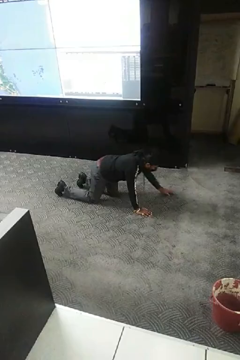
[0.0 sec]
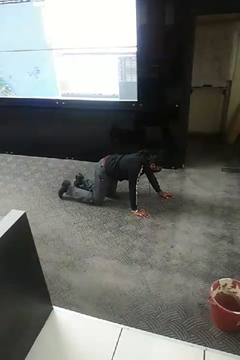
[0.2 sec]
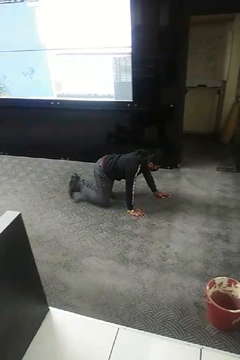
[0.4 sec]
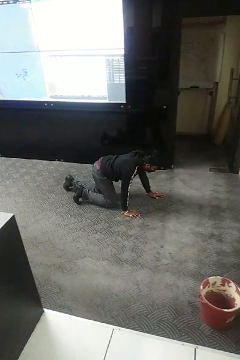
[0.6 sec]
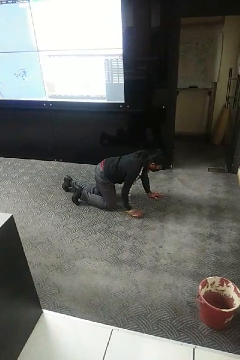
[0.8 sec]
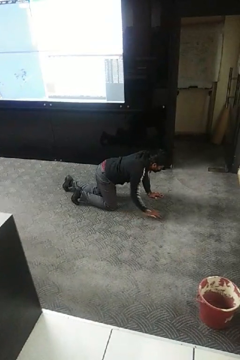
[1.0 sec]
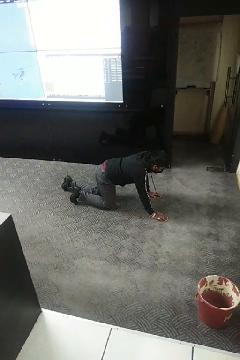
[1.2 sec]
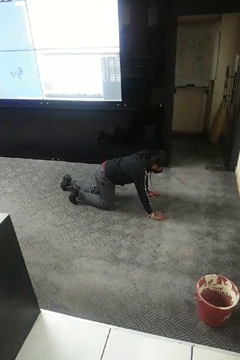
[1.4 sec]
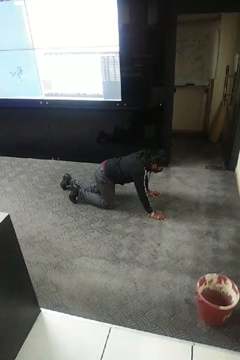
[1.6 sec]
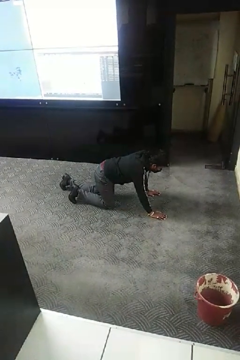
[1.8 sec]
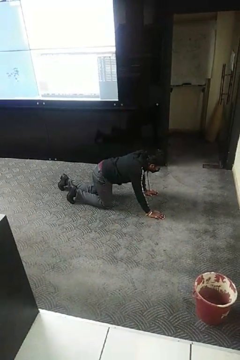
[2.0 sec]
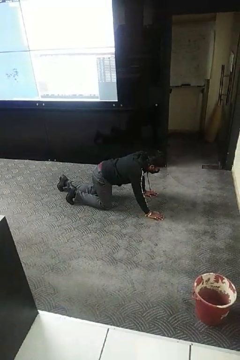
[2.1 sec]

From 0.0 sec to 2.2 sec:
person crawls

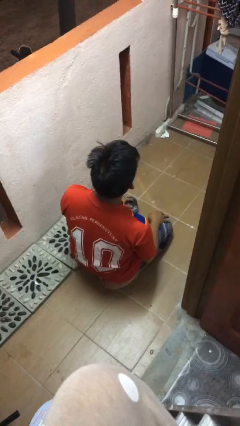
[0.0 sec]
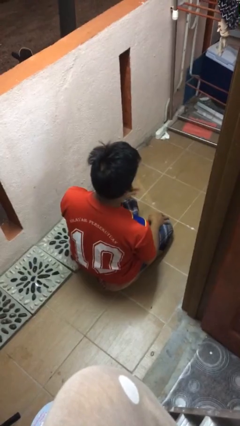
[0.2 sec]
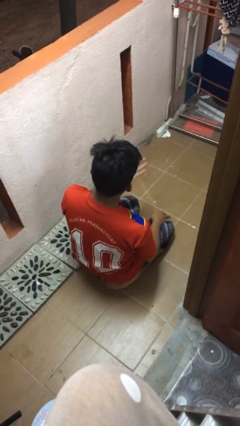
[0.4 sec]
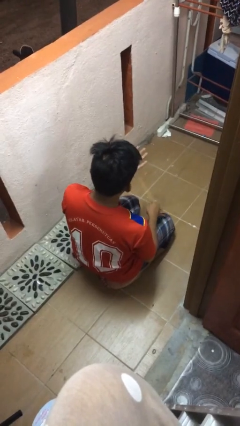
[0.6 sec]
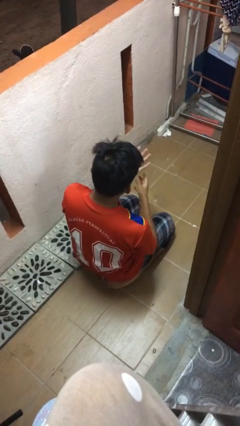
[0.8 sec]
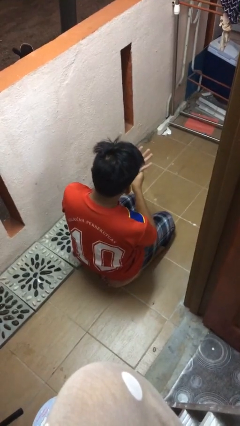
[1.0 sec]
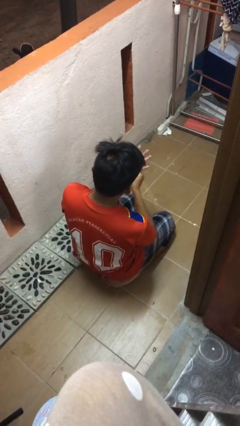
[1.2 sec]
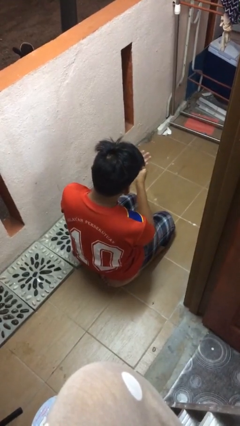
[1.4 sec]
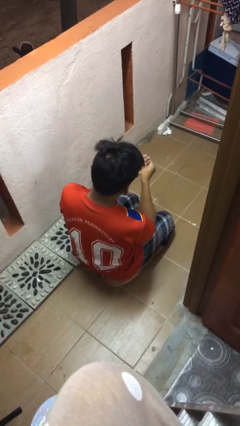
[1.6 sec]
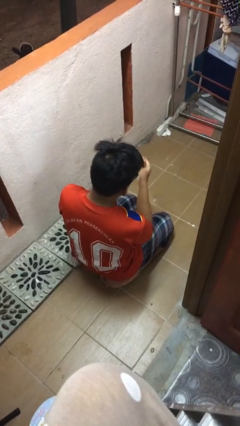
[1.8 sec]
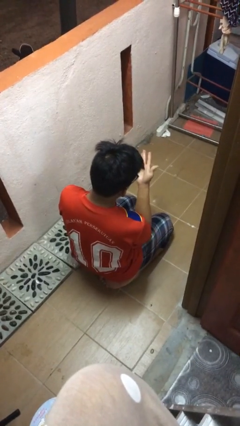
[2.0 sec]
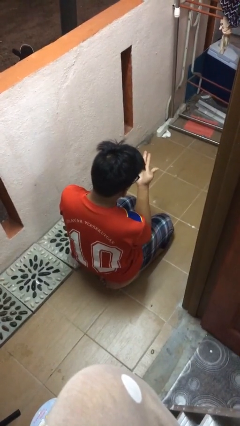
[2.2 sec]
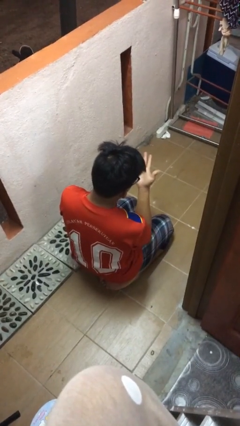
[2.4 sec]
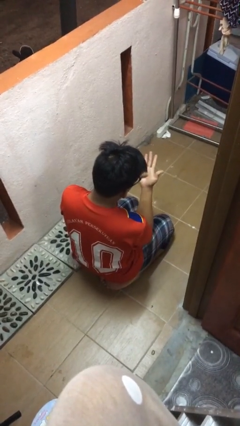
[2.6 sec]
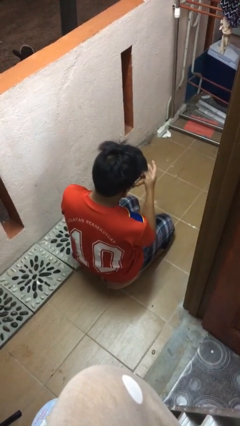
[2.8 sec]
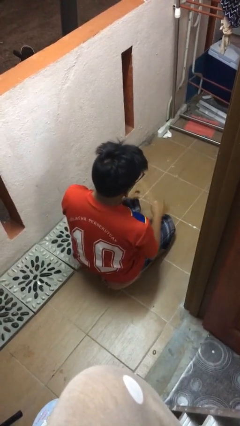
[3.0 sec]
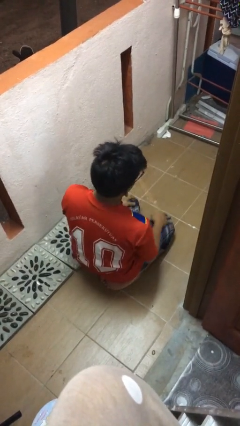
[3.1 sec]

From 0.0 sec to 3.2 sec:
person looks at hands in lap

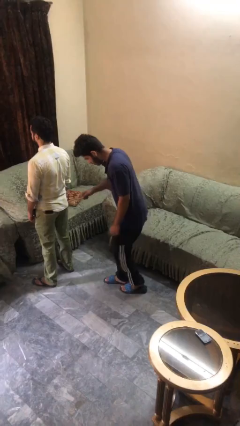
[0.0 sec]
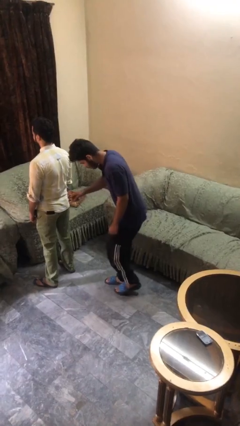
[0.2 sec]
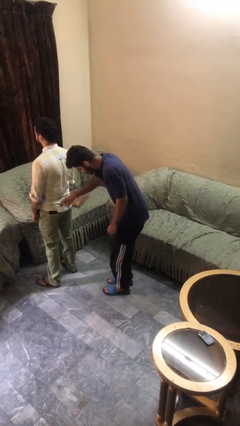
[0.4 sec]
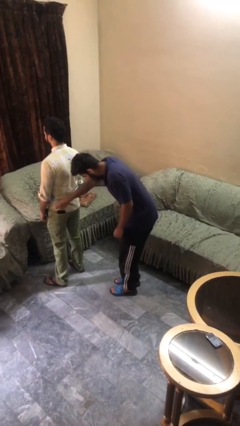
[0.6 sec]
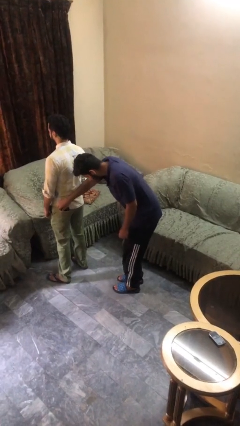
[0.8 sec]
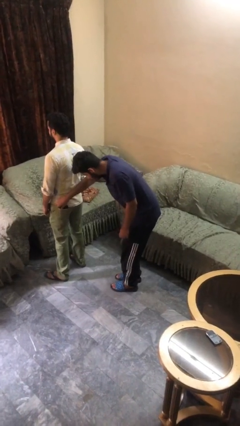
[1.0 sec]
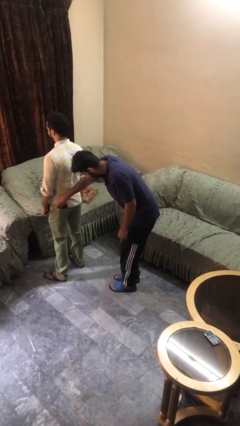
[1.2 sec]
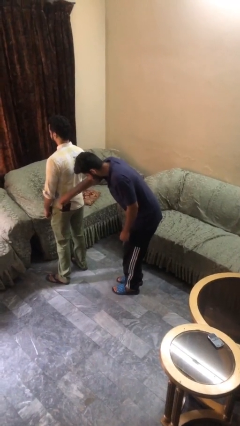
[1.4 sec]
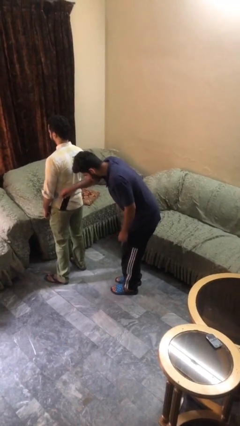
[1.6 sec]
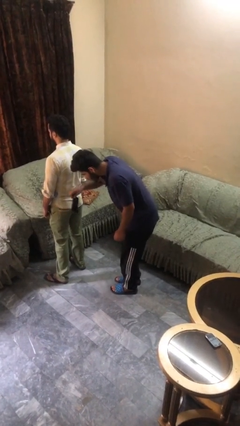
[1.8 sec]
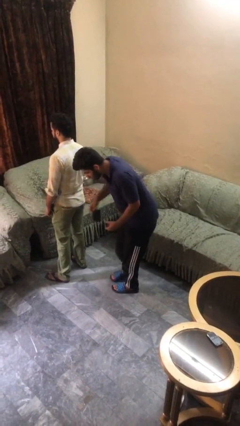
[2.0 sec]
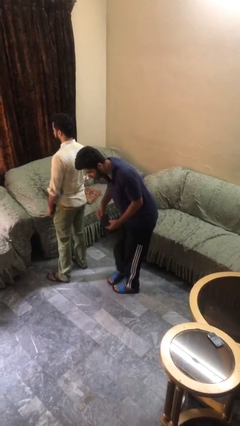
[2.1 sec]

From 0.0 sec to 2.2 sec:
person steals object from person

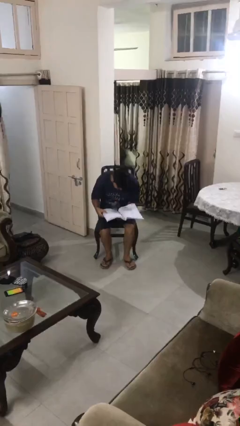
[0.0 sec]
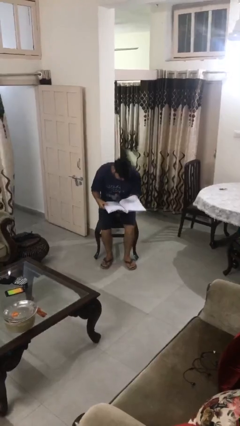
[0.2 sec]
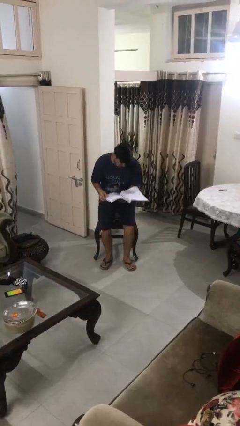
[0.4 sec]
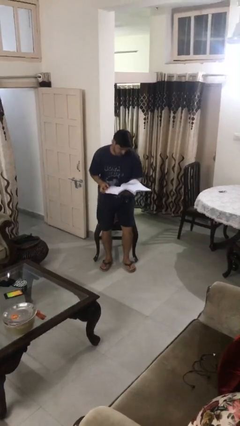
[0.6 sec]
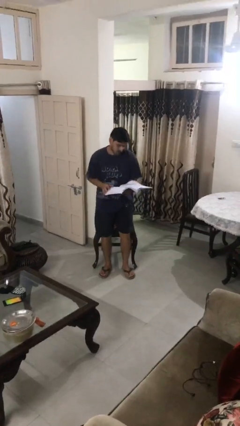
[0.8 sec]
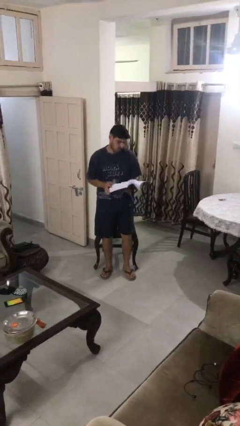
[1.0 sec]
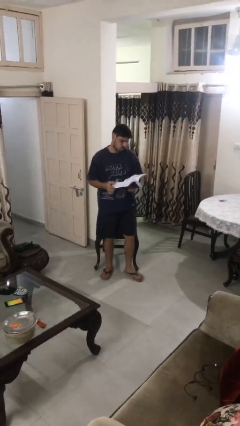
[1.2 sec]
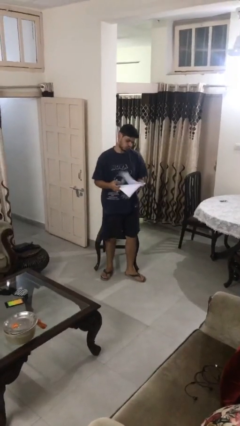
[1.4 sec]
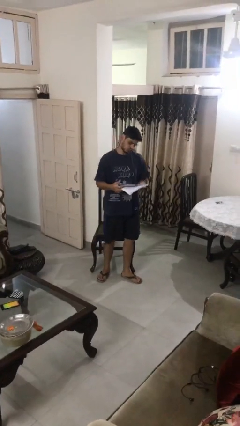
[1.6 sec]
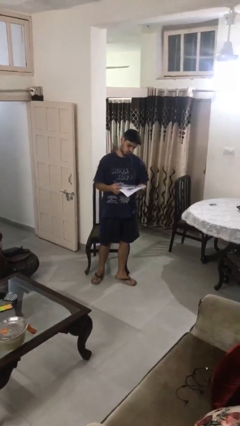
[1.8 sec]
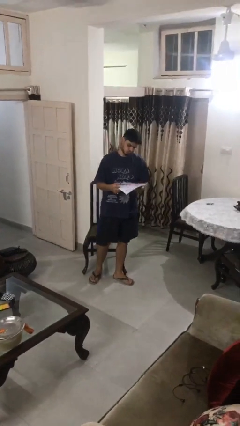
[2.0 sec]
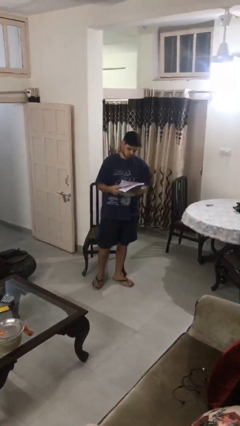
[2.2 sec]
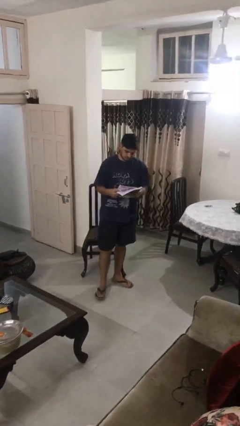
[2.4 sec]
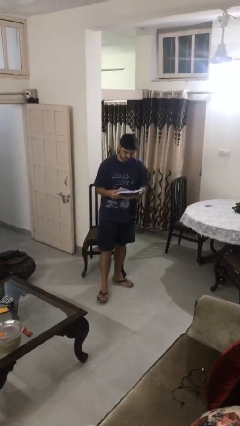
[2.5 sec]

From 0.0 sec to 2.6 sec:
person stands up

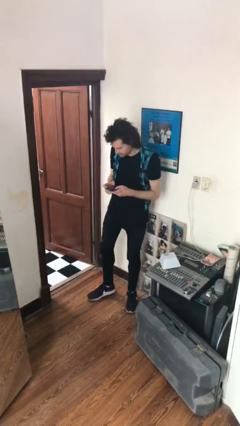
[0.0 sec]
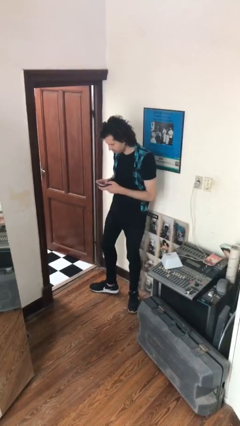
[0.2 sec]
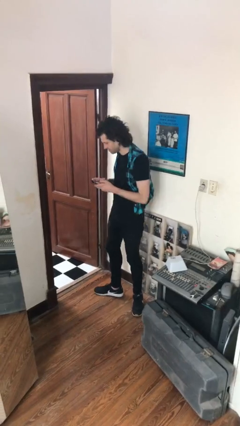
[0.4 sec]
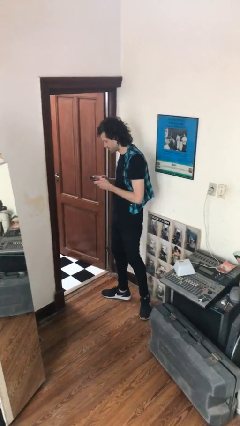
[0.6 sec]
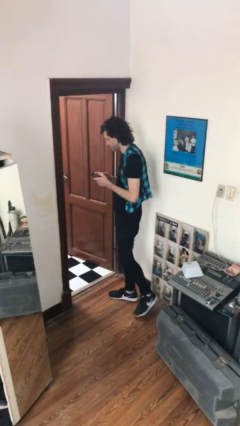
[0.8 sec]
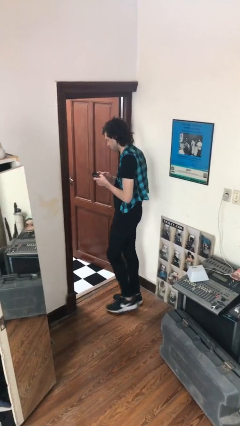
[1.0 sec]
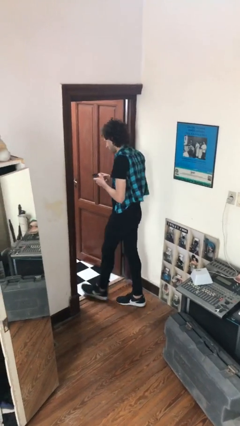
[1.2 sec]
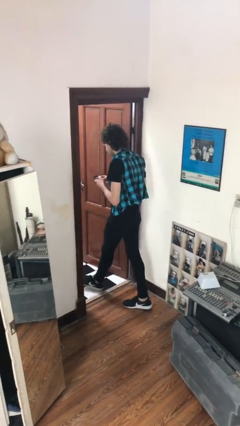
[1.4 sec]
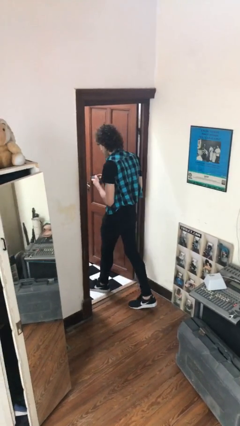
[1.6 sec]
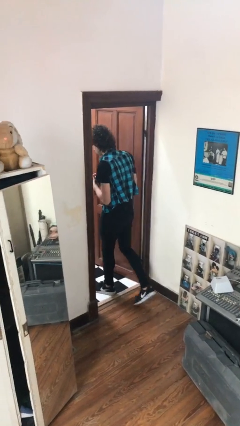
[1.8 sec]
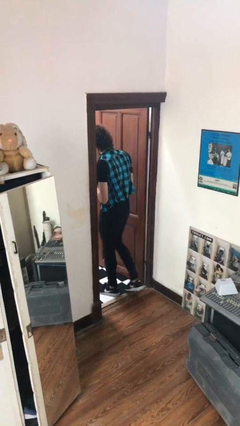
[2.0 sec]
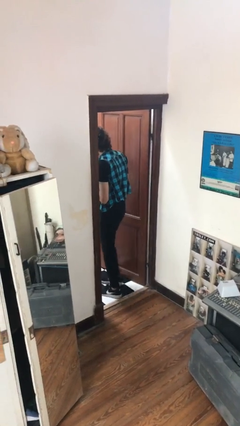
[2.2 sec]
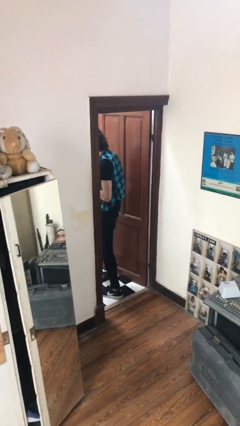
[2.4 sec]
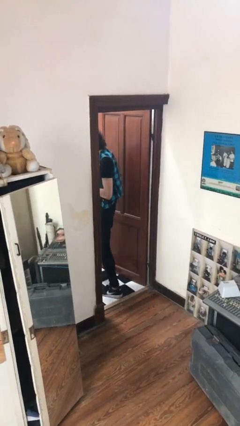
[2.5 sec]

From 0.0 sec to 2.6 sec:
person exits scene through structure

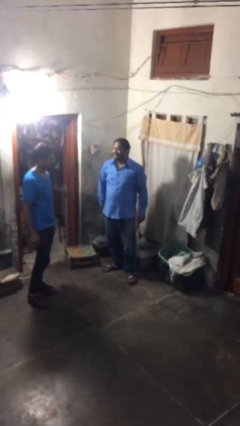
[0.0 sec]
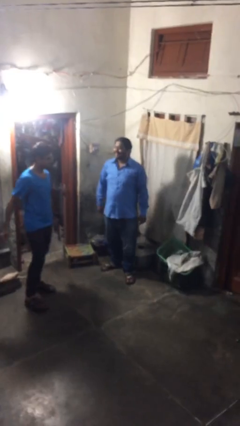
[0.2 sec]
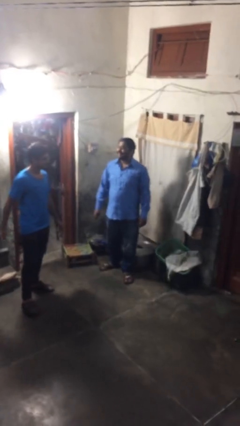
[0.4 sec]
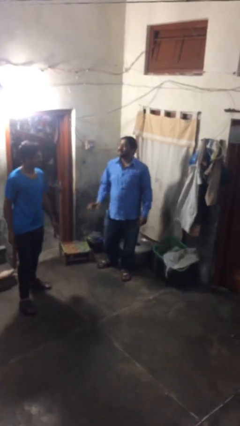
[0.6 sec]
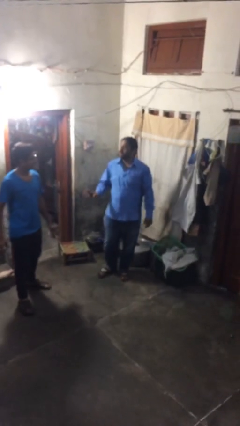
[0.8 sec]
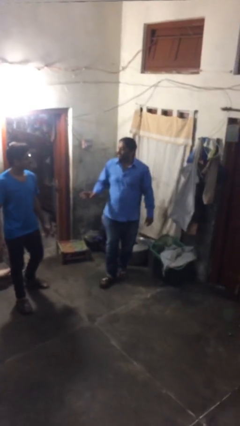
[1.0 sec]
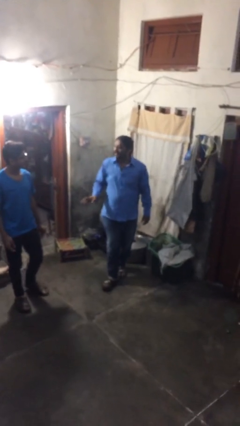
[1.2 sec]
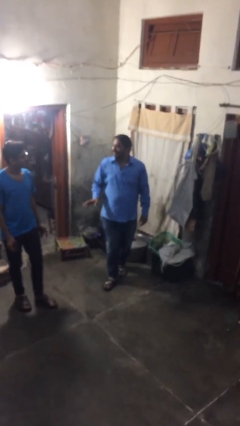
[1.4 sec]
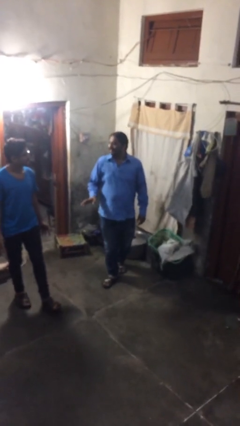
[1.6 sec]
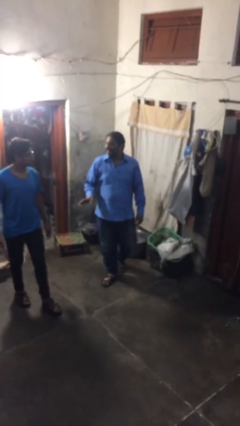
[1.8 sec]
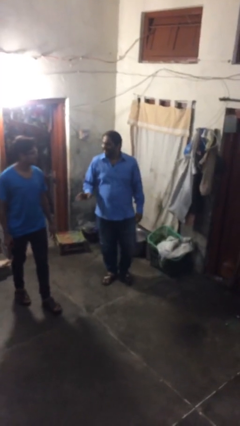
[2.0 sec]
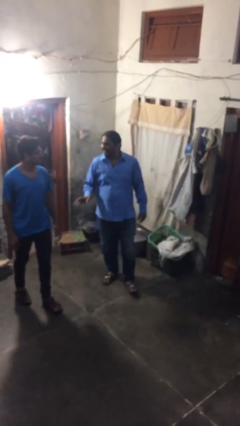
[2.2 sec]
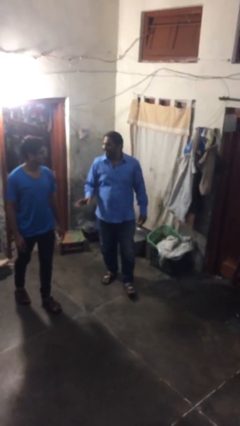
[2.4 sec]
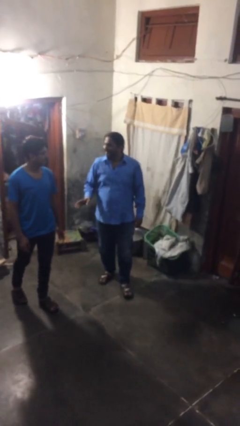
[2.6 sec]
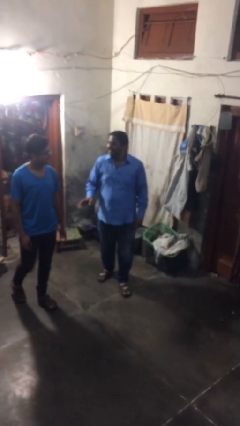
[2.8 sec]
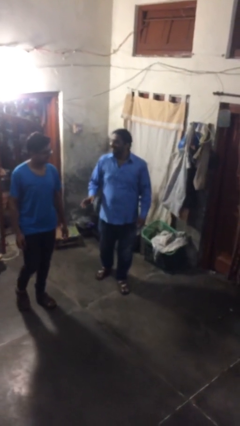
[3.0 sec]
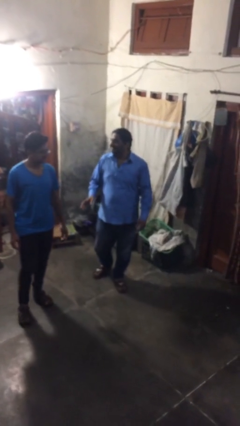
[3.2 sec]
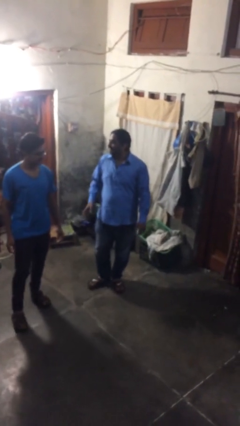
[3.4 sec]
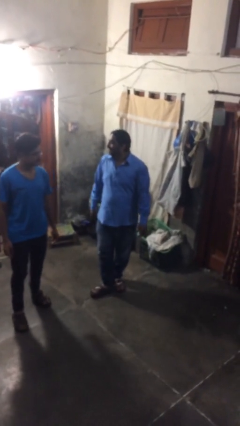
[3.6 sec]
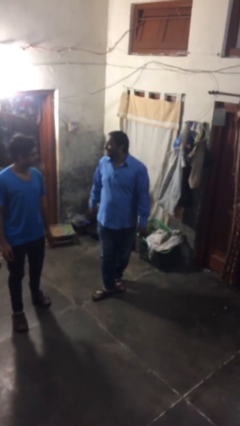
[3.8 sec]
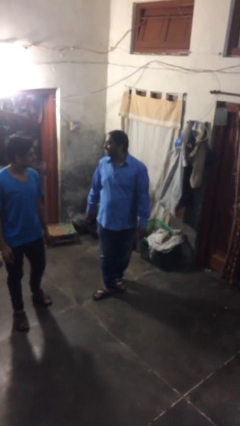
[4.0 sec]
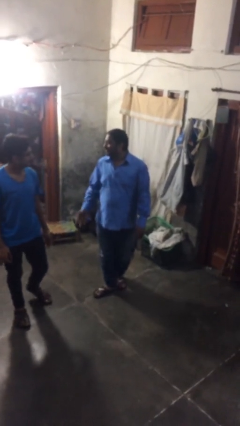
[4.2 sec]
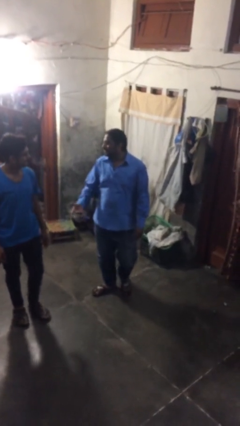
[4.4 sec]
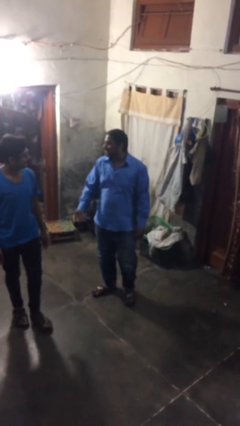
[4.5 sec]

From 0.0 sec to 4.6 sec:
person talks to person

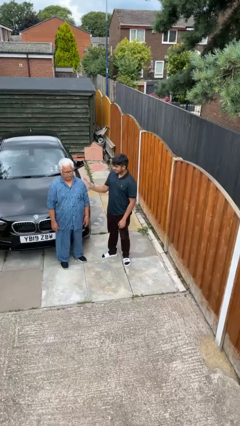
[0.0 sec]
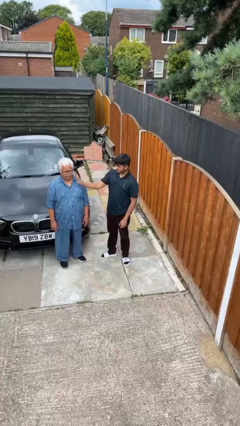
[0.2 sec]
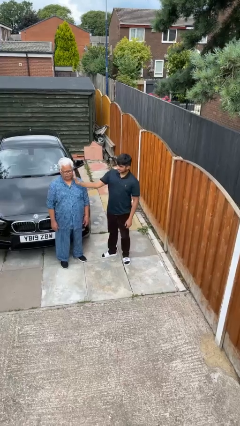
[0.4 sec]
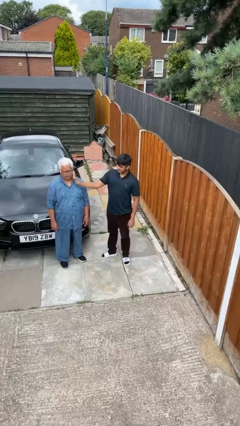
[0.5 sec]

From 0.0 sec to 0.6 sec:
person touches face of person
